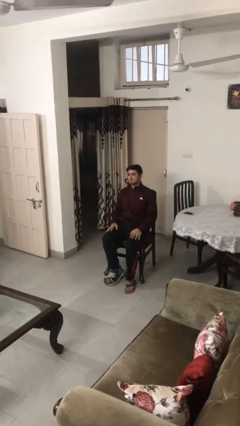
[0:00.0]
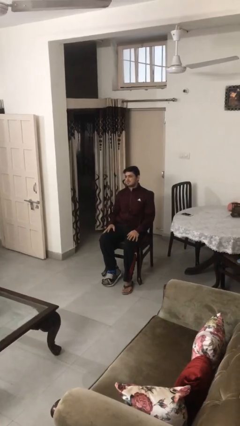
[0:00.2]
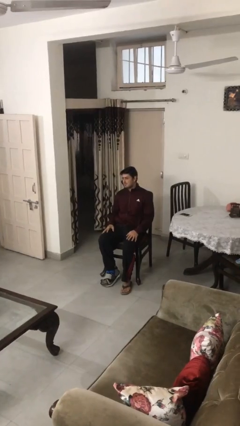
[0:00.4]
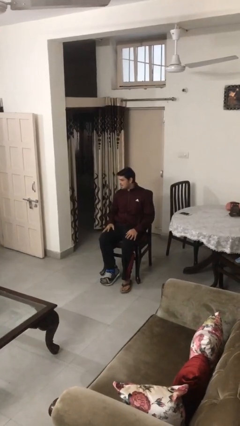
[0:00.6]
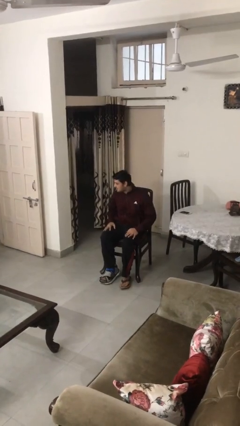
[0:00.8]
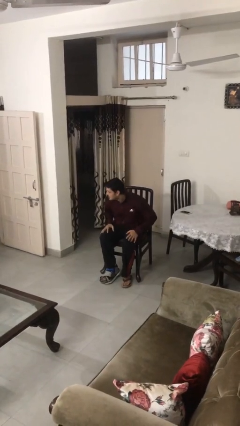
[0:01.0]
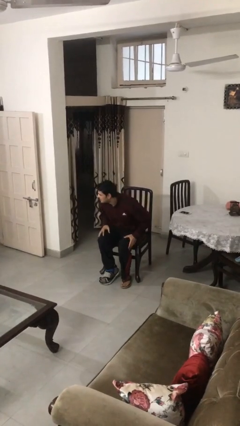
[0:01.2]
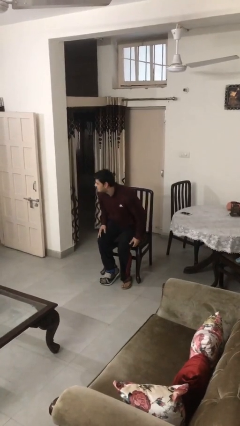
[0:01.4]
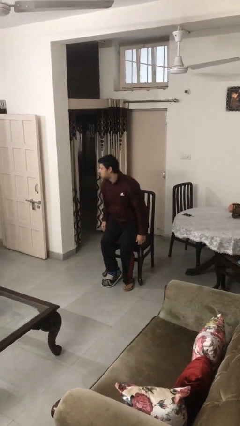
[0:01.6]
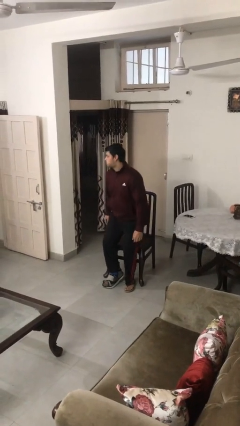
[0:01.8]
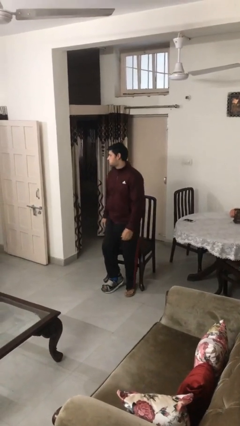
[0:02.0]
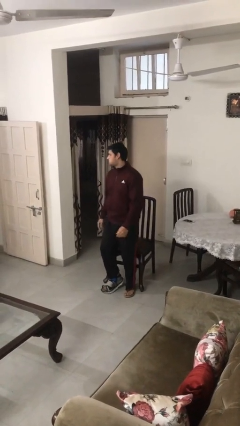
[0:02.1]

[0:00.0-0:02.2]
person stands up

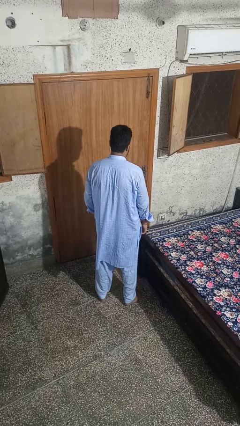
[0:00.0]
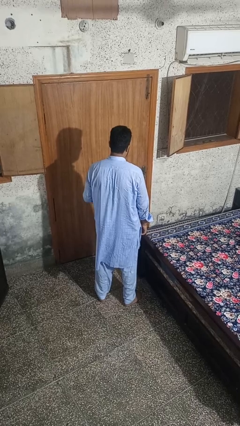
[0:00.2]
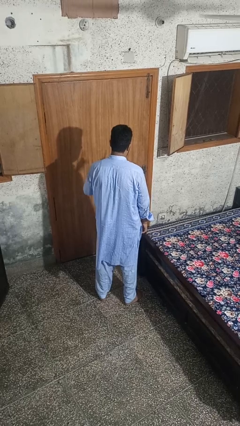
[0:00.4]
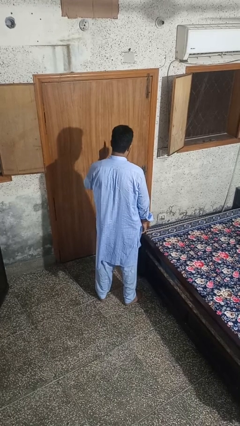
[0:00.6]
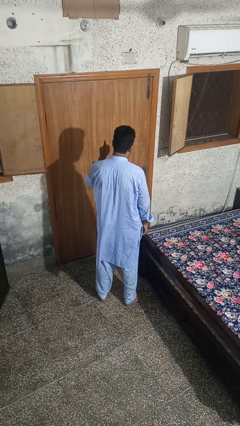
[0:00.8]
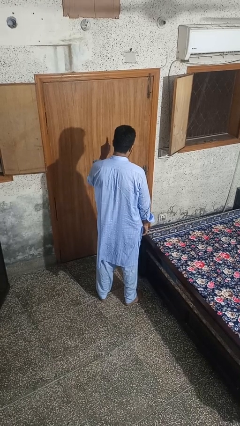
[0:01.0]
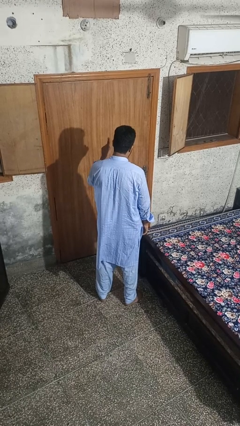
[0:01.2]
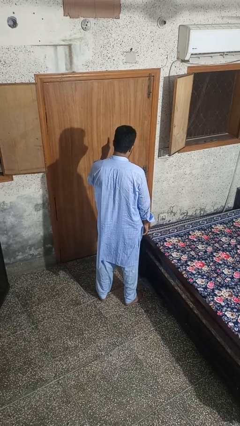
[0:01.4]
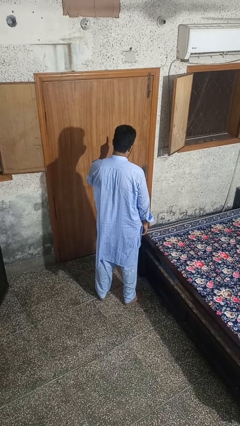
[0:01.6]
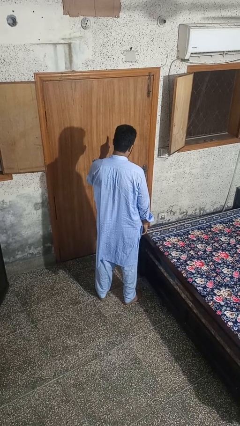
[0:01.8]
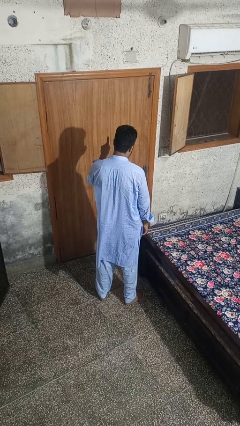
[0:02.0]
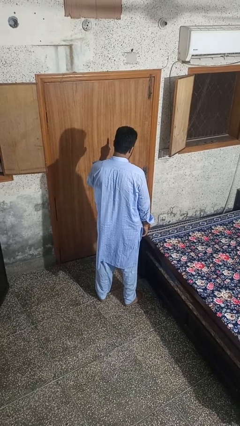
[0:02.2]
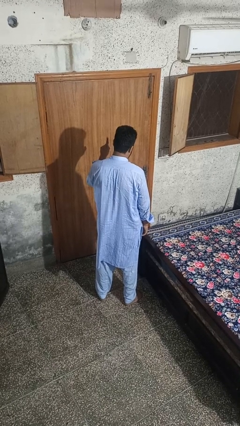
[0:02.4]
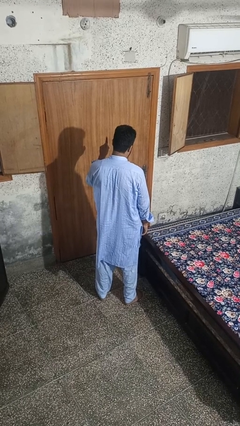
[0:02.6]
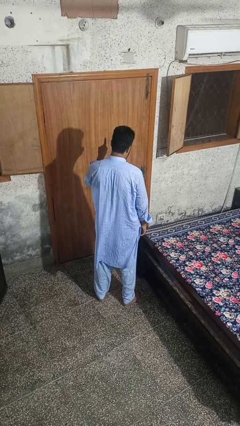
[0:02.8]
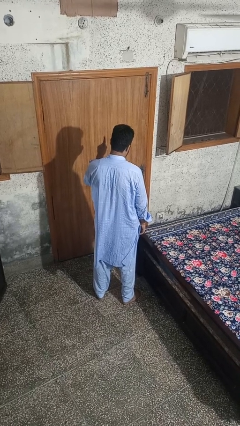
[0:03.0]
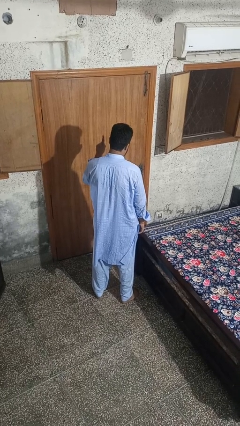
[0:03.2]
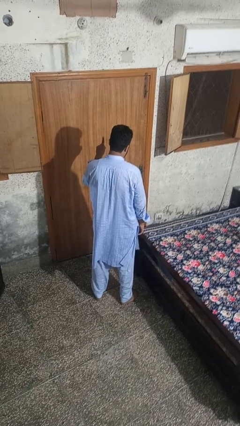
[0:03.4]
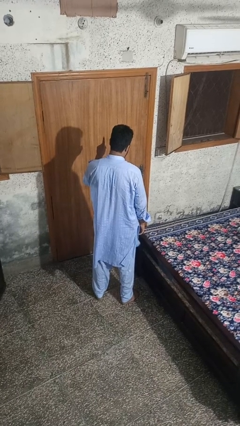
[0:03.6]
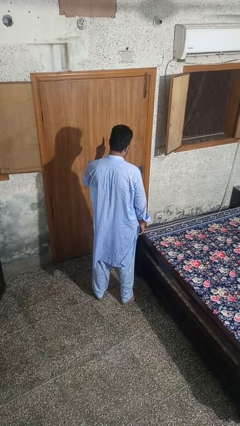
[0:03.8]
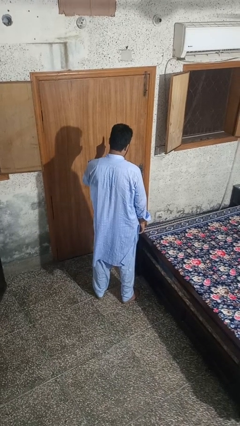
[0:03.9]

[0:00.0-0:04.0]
person gestures number one

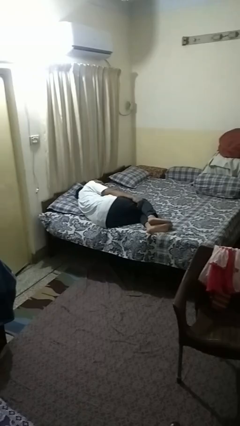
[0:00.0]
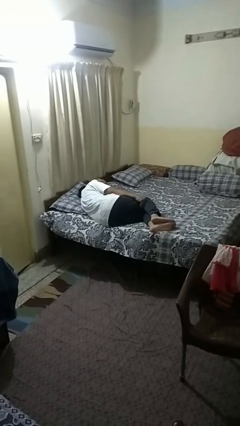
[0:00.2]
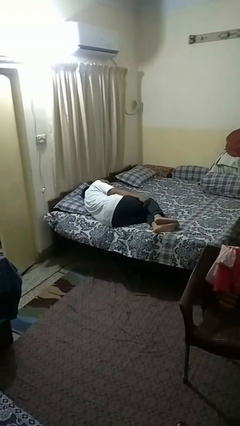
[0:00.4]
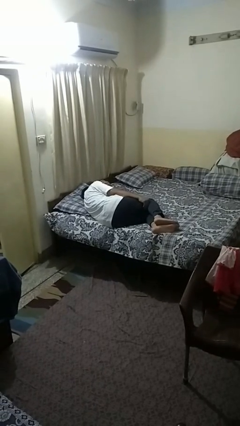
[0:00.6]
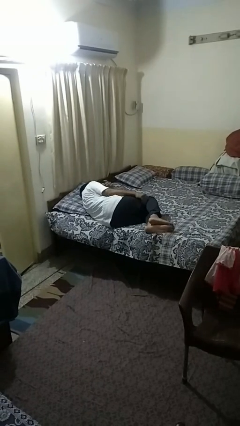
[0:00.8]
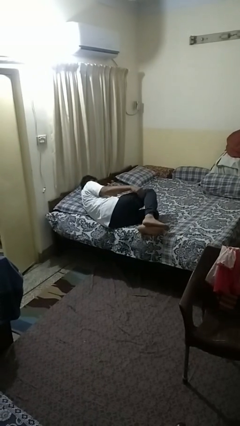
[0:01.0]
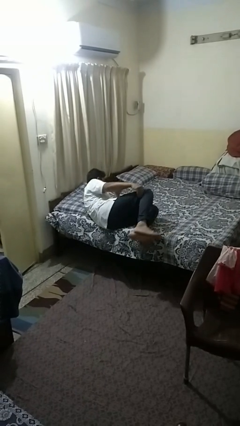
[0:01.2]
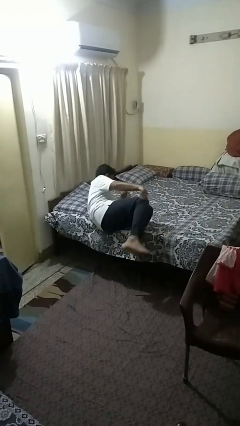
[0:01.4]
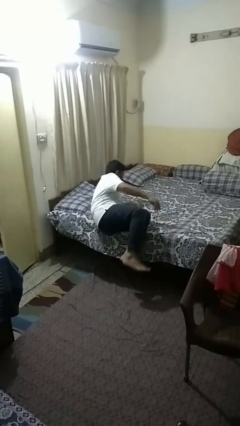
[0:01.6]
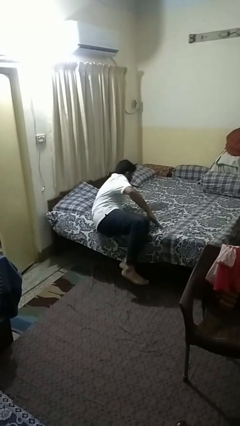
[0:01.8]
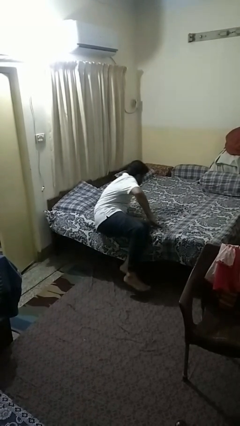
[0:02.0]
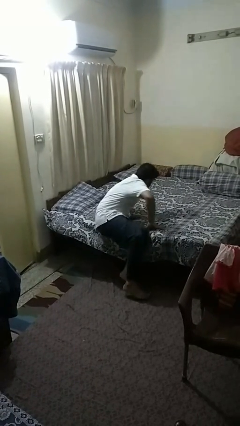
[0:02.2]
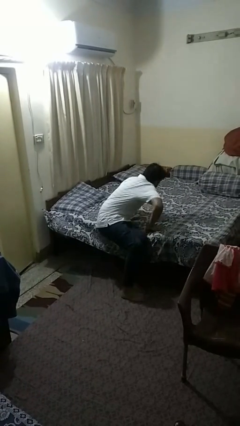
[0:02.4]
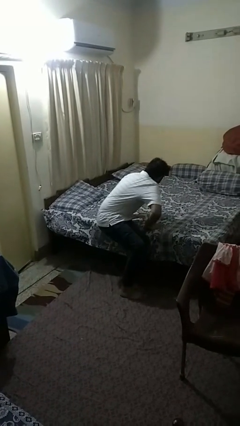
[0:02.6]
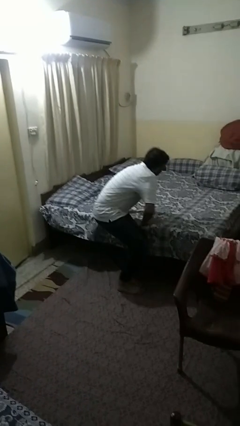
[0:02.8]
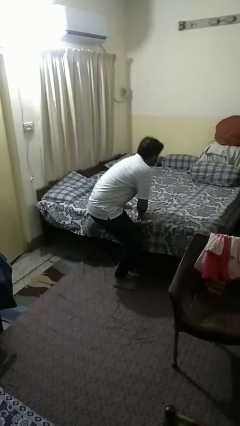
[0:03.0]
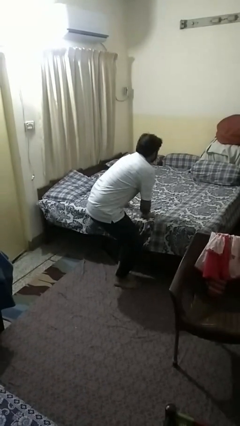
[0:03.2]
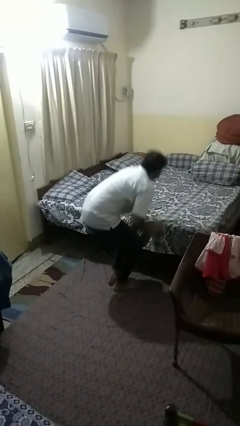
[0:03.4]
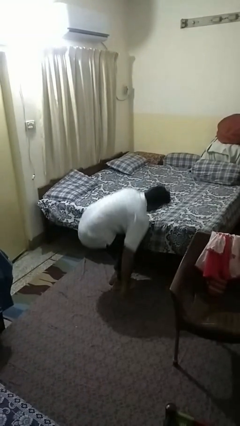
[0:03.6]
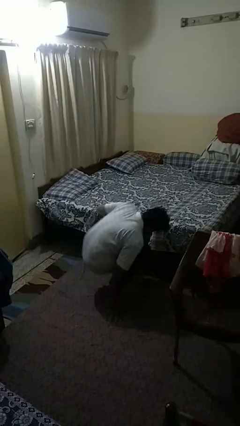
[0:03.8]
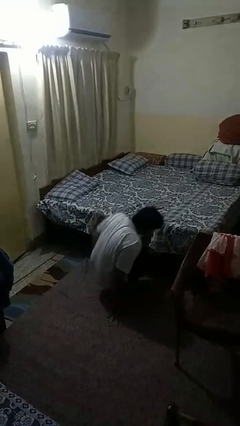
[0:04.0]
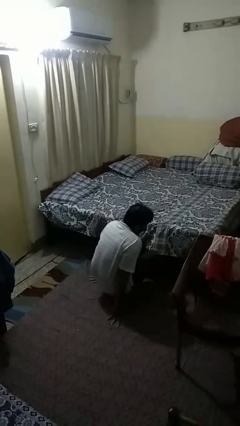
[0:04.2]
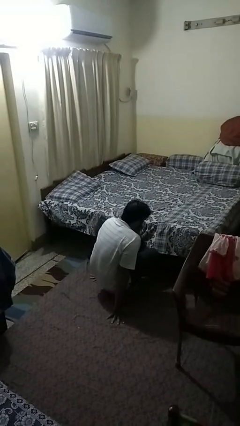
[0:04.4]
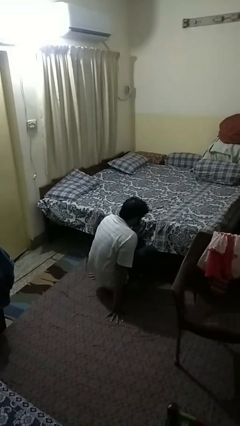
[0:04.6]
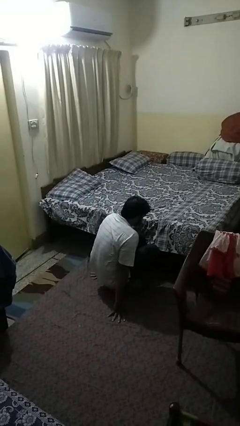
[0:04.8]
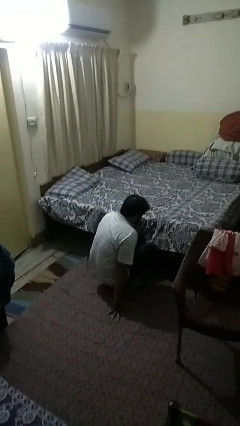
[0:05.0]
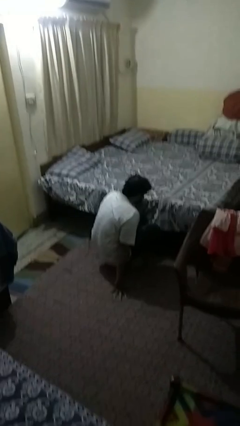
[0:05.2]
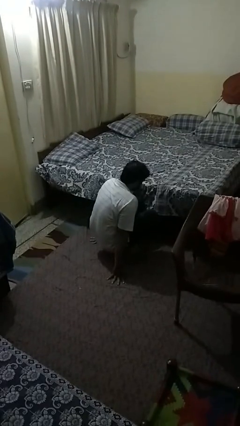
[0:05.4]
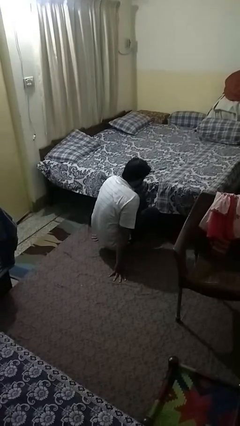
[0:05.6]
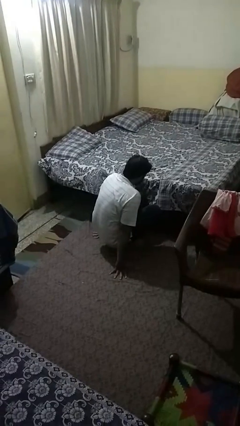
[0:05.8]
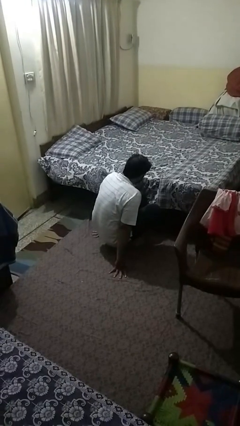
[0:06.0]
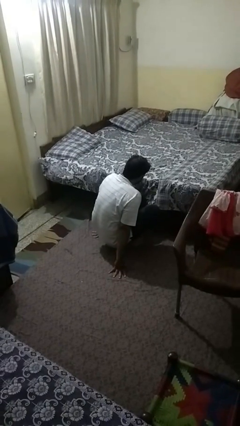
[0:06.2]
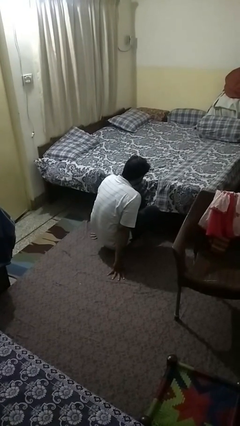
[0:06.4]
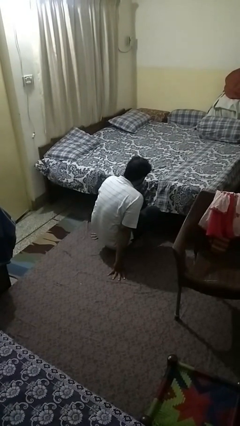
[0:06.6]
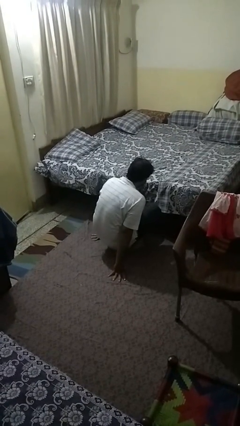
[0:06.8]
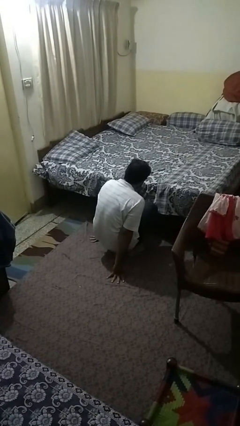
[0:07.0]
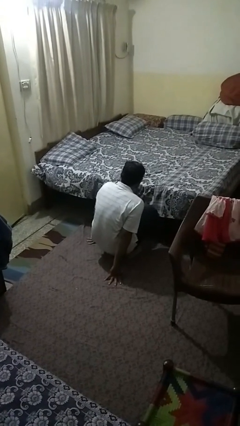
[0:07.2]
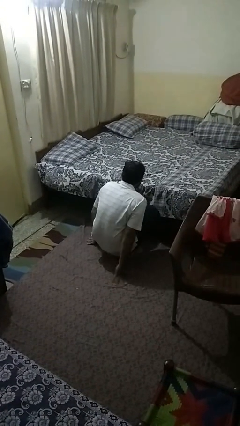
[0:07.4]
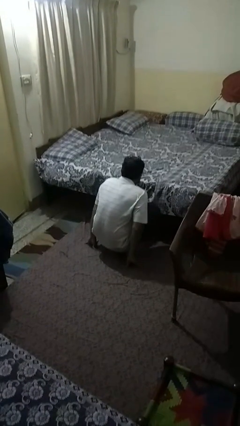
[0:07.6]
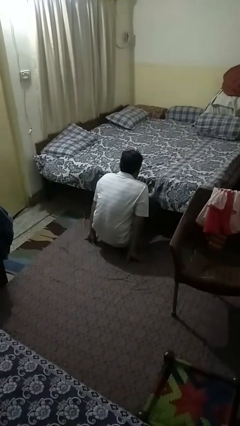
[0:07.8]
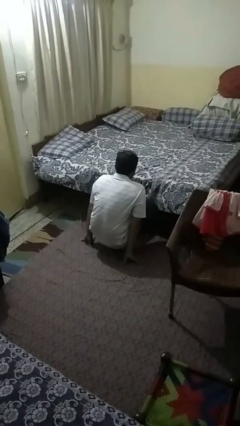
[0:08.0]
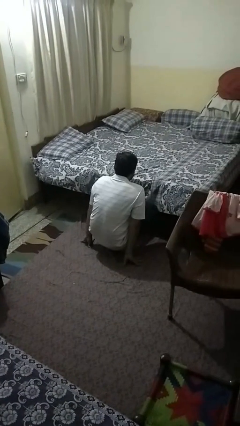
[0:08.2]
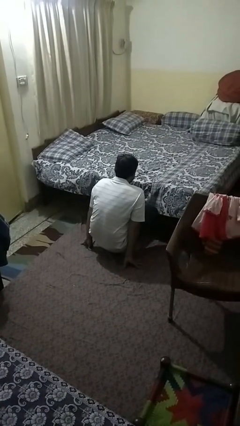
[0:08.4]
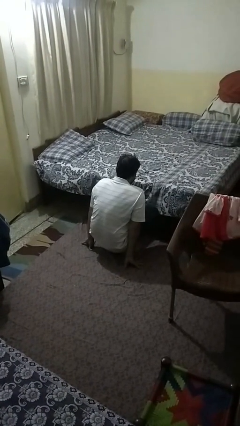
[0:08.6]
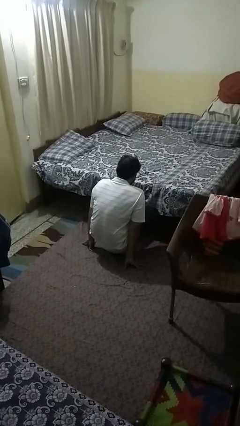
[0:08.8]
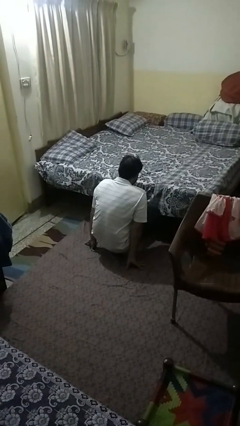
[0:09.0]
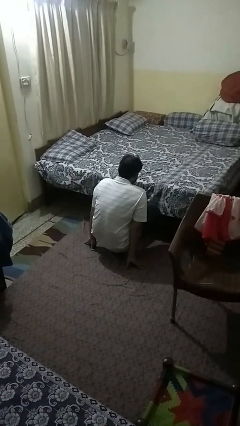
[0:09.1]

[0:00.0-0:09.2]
person falls from bed

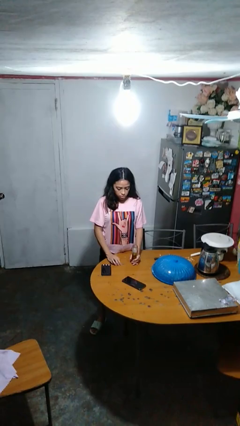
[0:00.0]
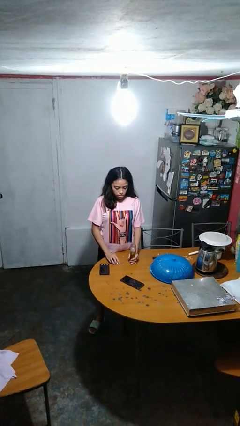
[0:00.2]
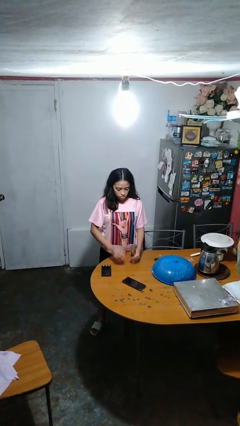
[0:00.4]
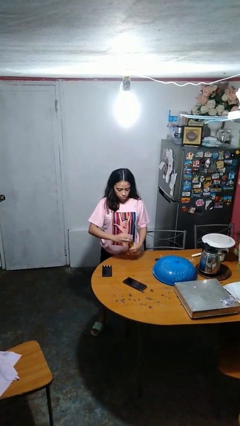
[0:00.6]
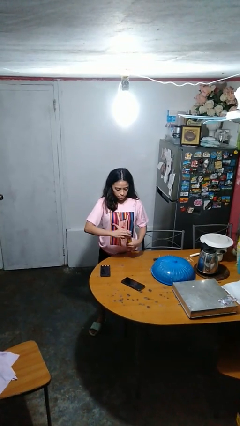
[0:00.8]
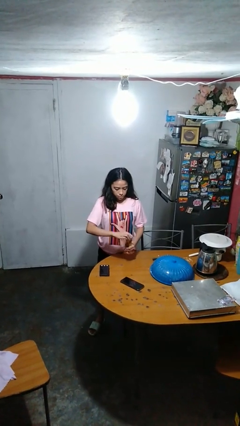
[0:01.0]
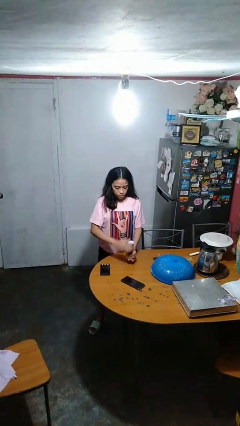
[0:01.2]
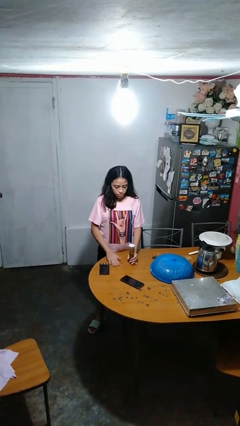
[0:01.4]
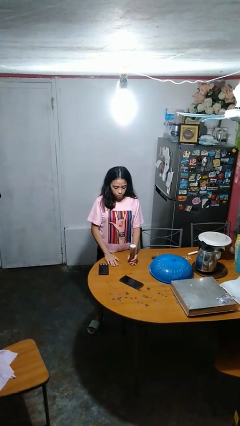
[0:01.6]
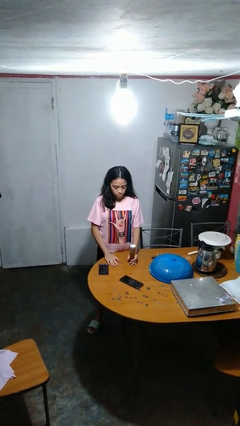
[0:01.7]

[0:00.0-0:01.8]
person closes jar
